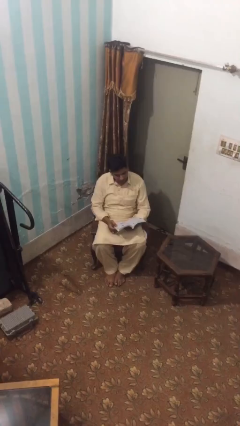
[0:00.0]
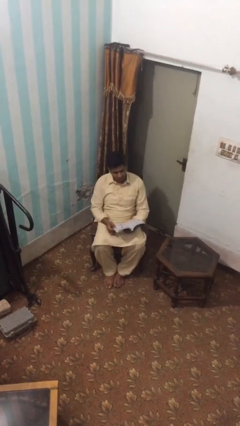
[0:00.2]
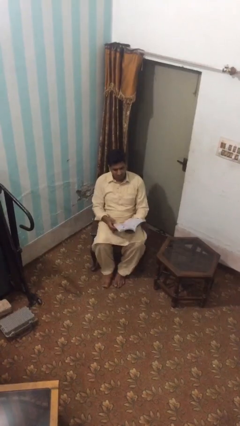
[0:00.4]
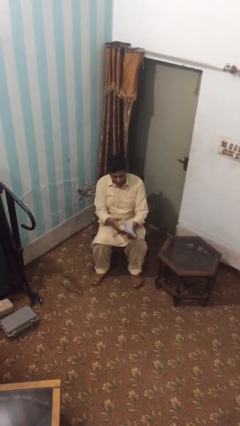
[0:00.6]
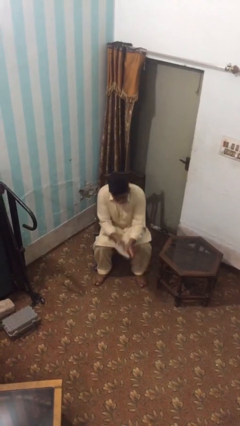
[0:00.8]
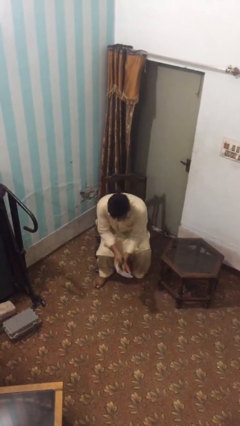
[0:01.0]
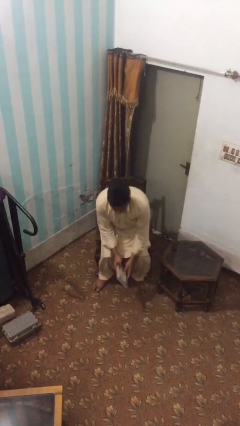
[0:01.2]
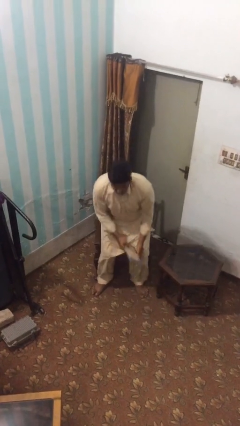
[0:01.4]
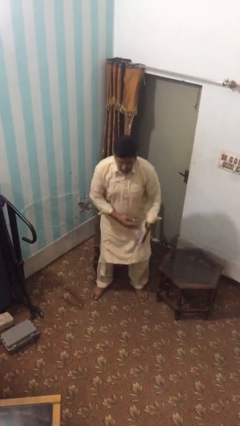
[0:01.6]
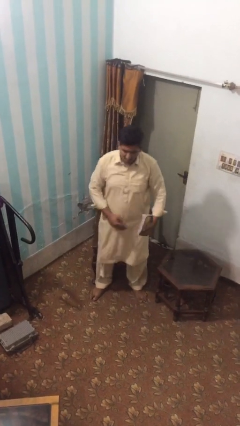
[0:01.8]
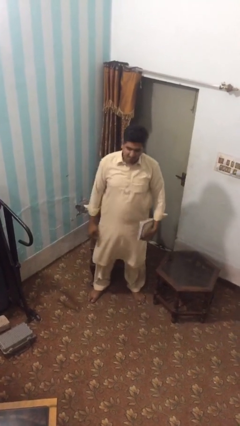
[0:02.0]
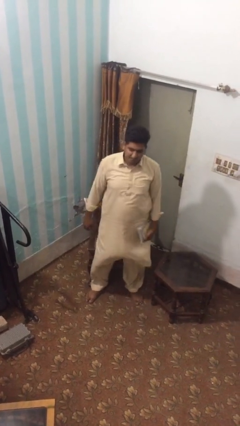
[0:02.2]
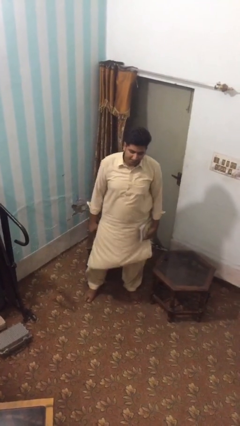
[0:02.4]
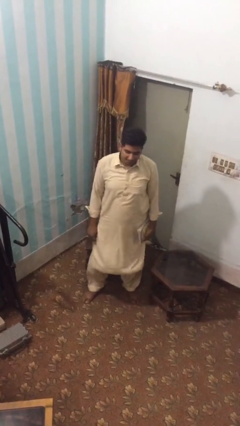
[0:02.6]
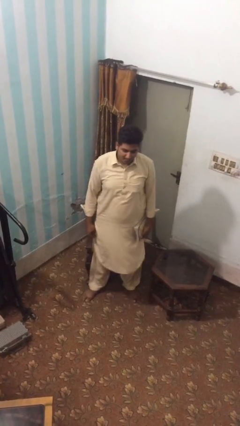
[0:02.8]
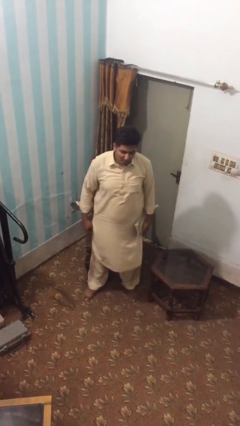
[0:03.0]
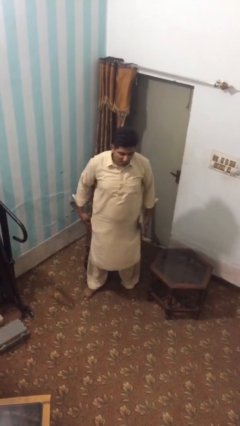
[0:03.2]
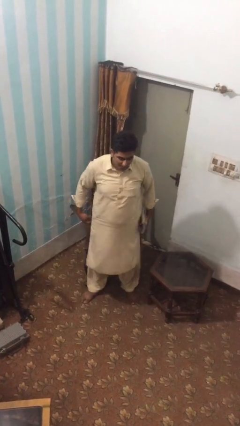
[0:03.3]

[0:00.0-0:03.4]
person stands up

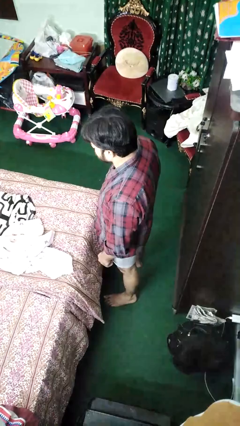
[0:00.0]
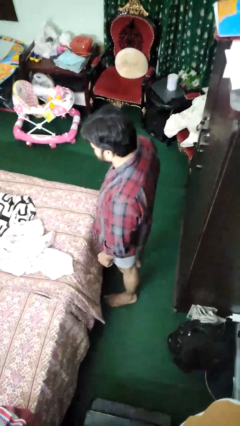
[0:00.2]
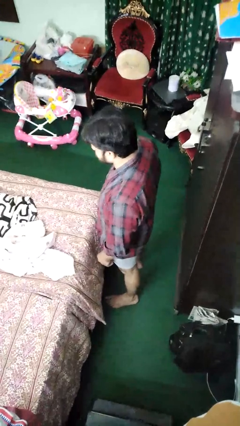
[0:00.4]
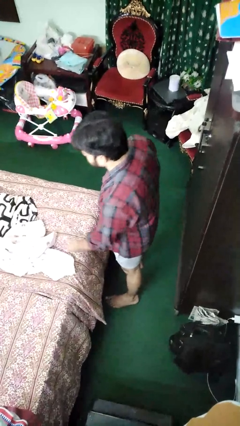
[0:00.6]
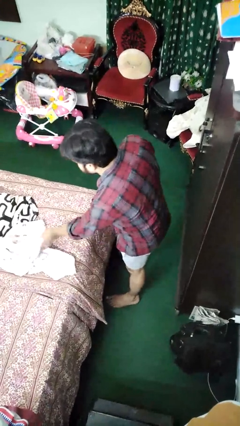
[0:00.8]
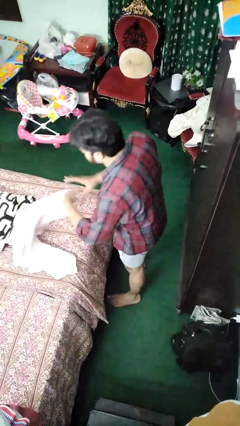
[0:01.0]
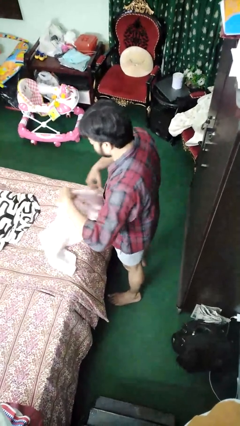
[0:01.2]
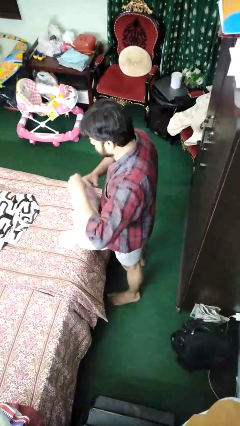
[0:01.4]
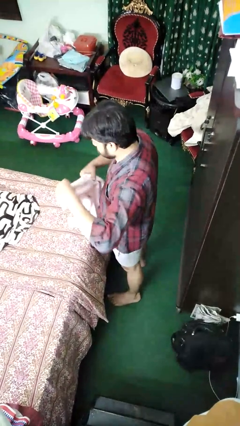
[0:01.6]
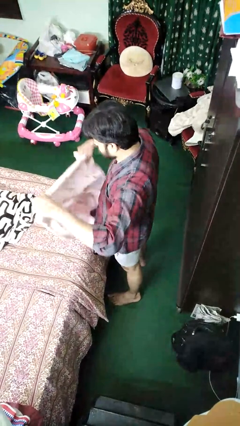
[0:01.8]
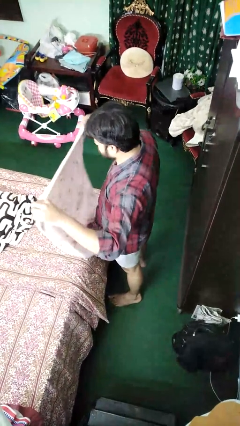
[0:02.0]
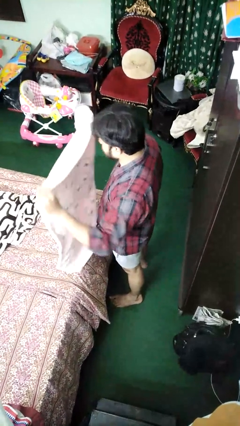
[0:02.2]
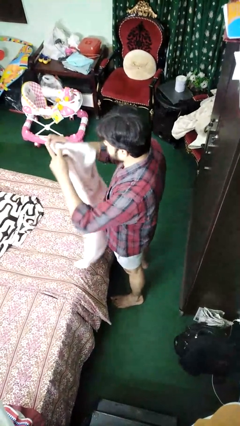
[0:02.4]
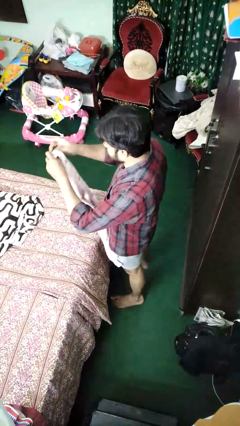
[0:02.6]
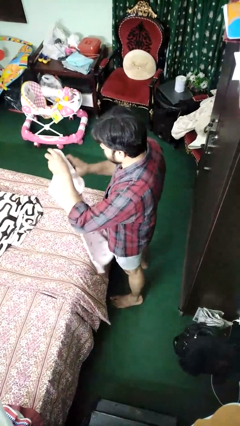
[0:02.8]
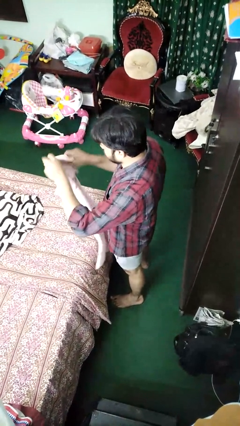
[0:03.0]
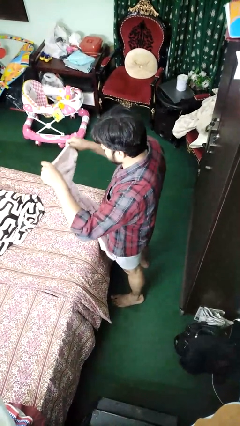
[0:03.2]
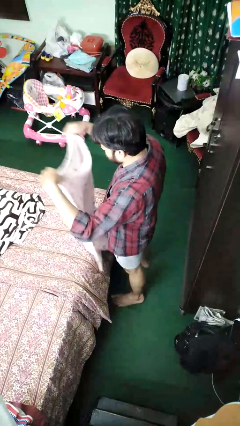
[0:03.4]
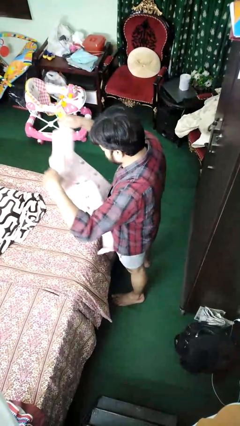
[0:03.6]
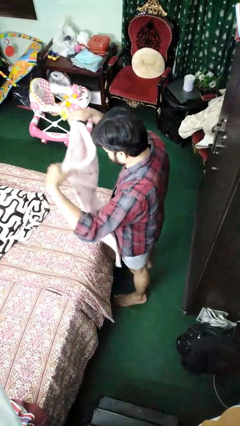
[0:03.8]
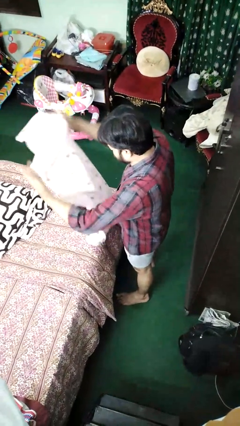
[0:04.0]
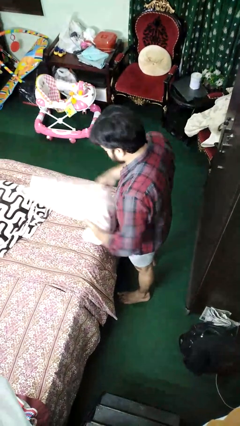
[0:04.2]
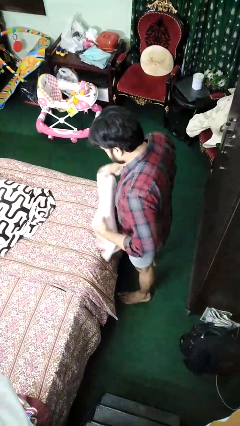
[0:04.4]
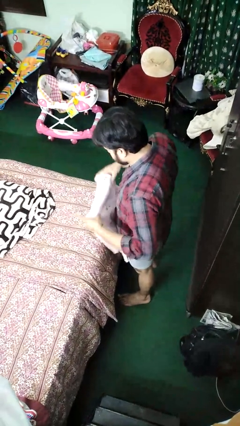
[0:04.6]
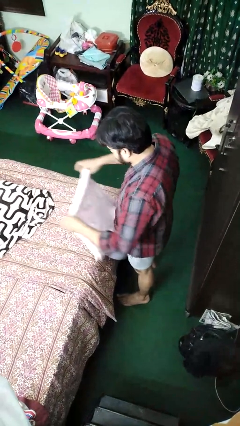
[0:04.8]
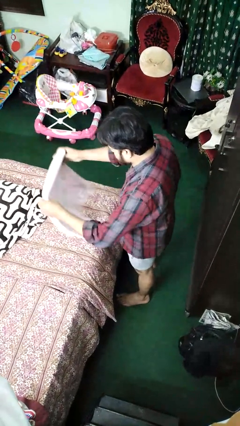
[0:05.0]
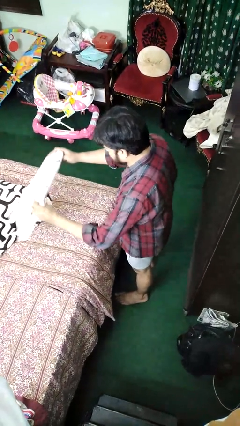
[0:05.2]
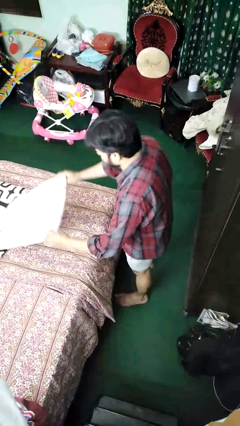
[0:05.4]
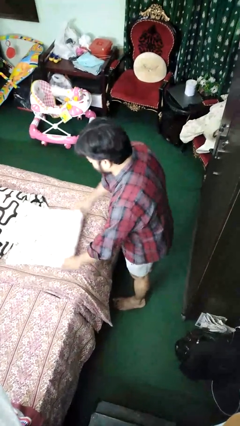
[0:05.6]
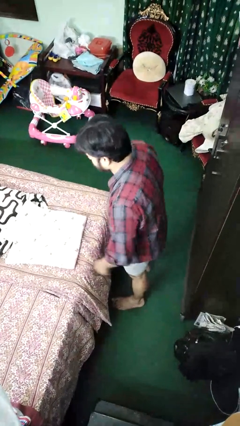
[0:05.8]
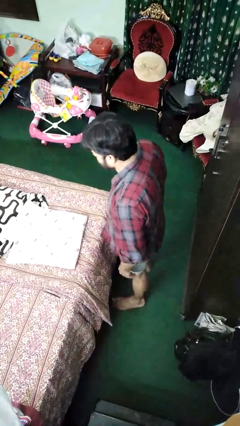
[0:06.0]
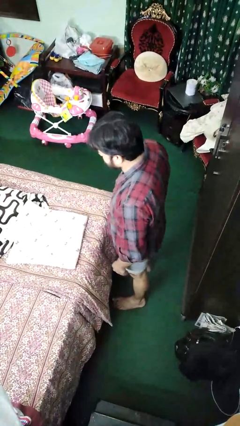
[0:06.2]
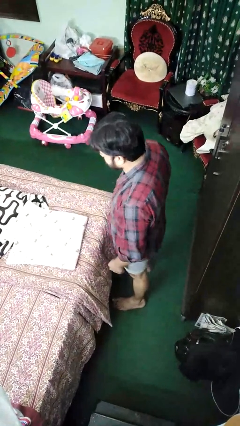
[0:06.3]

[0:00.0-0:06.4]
person folds blanket

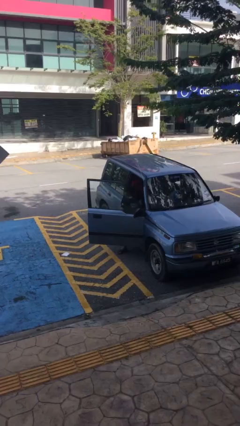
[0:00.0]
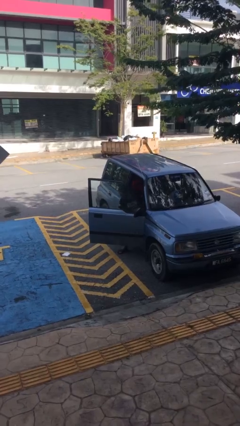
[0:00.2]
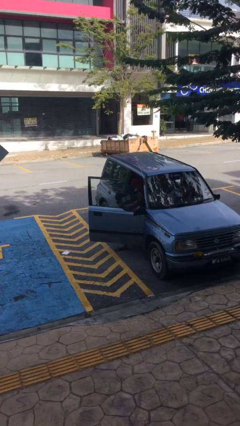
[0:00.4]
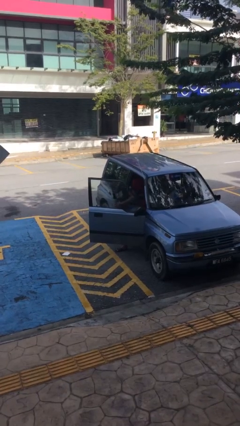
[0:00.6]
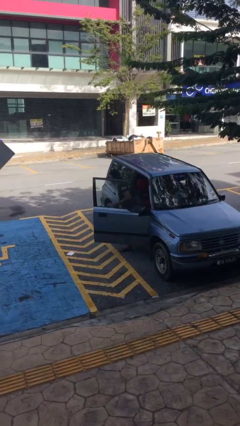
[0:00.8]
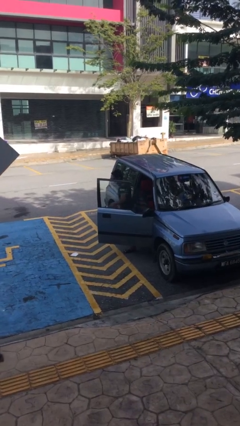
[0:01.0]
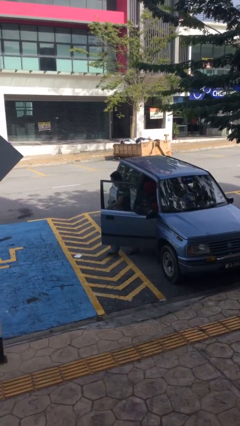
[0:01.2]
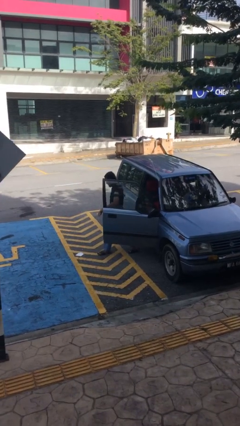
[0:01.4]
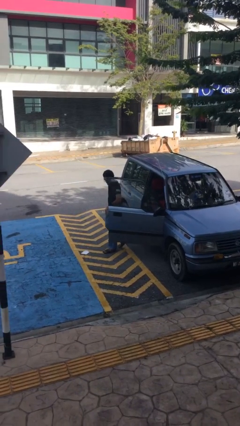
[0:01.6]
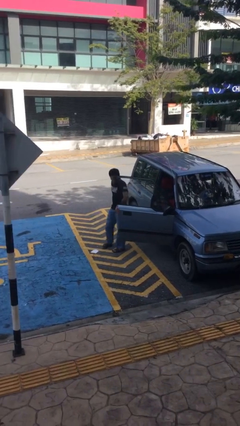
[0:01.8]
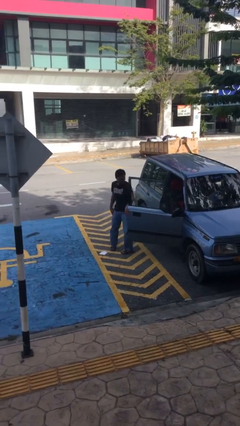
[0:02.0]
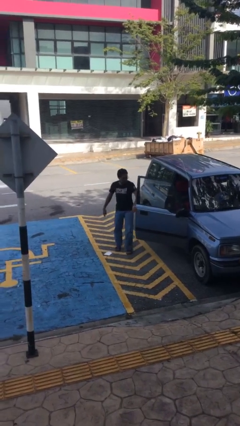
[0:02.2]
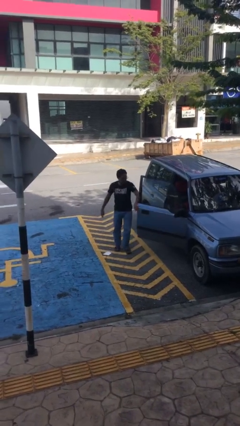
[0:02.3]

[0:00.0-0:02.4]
person exits car

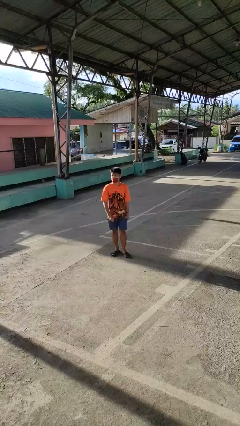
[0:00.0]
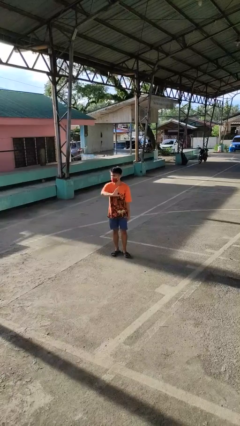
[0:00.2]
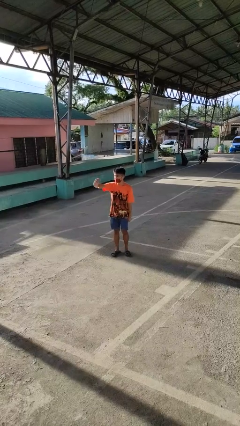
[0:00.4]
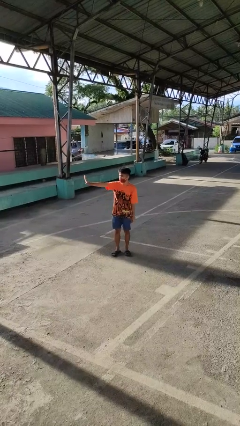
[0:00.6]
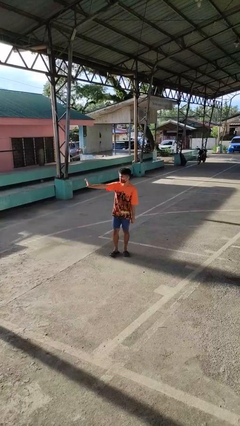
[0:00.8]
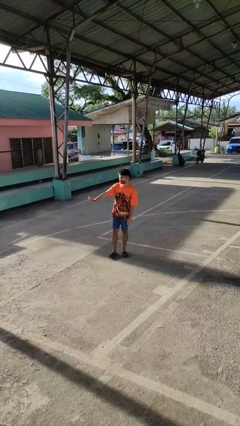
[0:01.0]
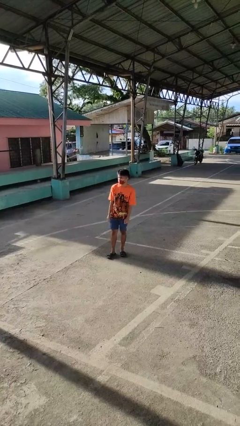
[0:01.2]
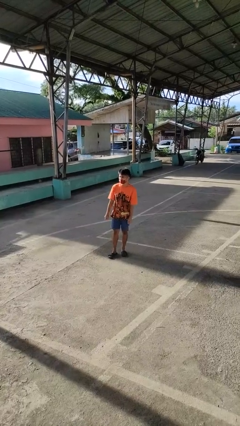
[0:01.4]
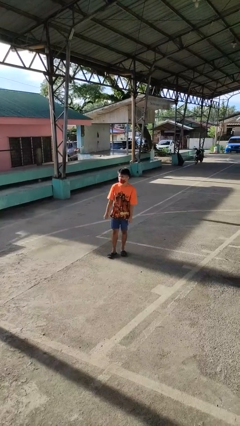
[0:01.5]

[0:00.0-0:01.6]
person gestures swipe right

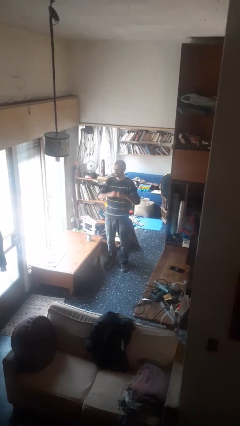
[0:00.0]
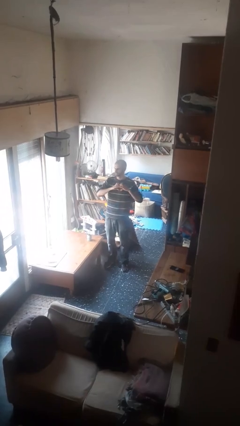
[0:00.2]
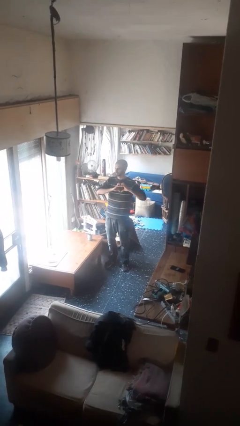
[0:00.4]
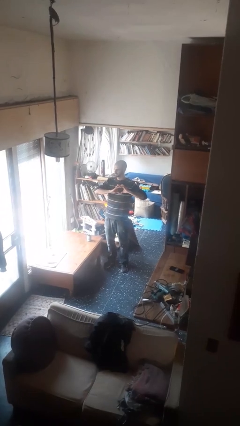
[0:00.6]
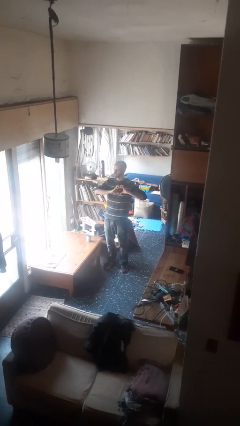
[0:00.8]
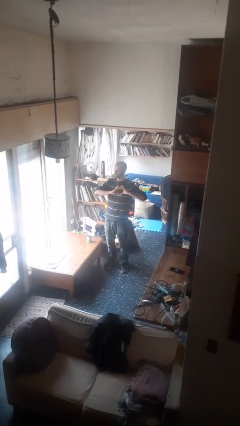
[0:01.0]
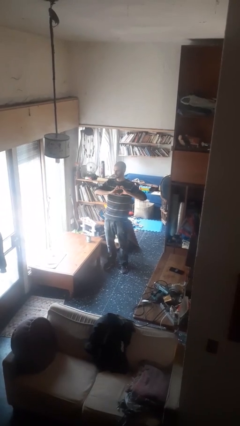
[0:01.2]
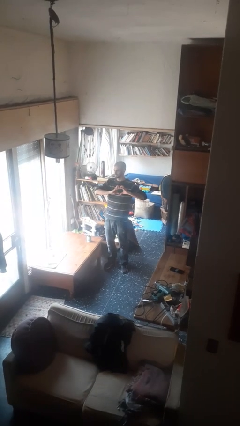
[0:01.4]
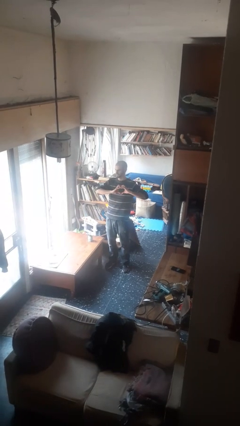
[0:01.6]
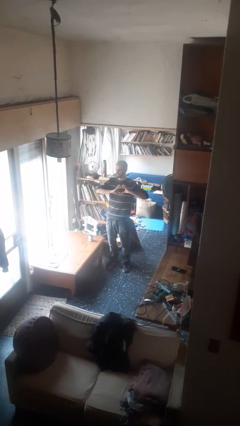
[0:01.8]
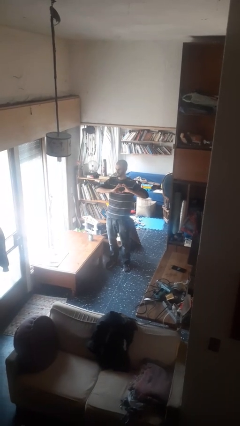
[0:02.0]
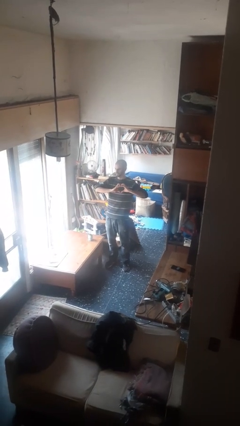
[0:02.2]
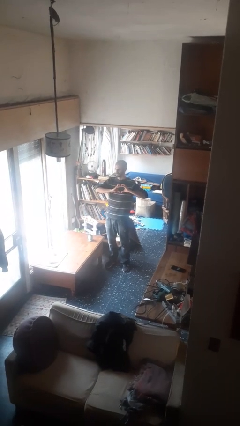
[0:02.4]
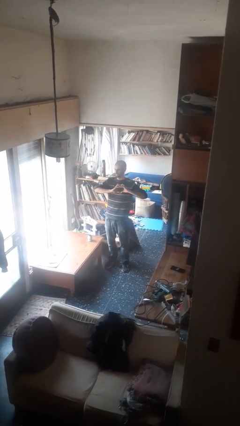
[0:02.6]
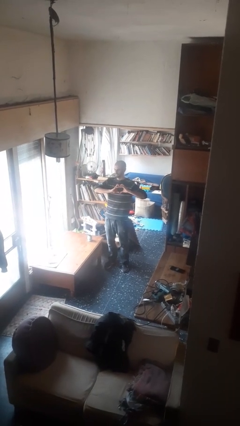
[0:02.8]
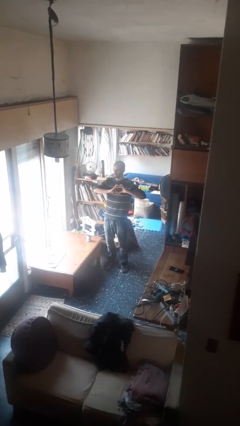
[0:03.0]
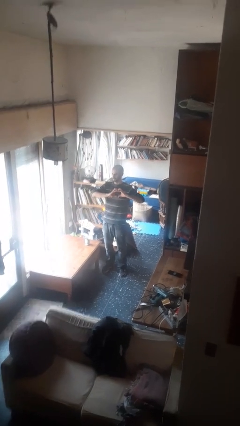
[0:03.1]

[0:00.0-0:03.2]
person gestures heart

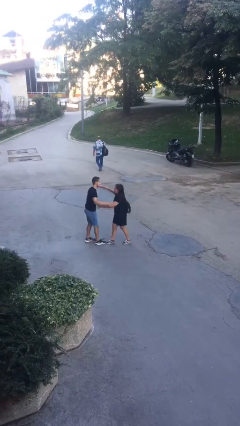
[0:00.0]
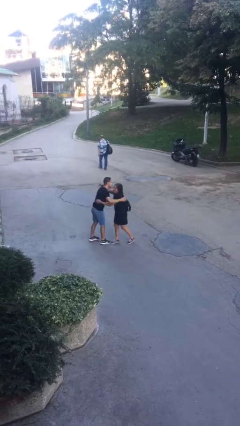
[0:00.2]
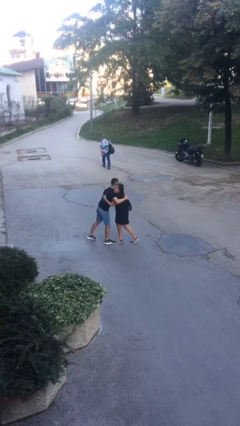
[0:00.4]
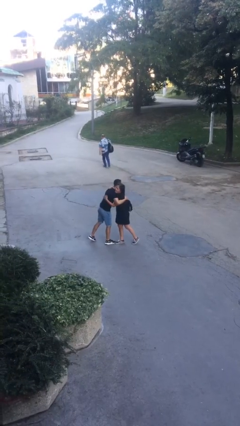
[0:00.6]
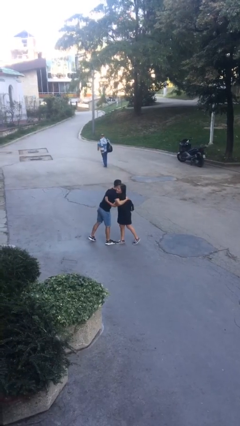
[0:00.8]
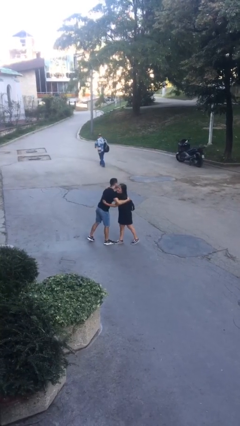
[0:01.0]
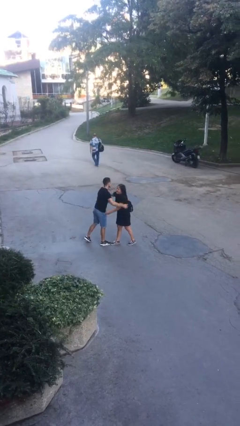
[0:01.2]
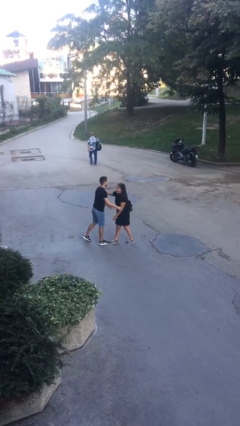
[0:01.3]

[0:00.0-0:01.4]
person embraces person
